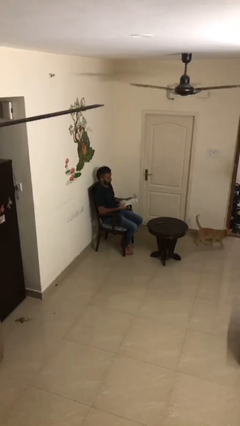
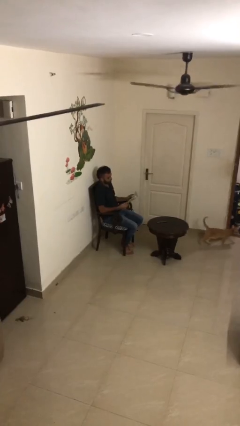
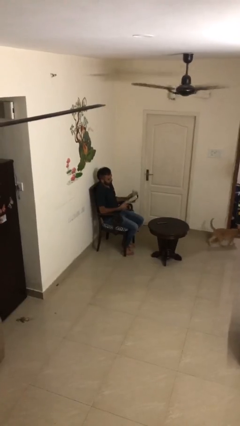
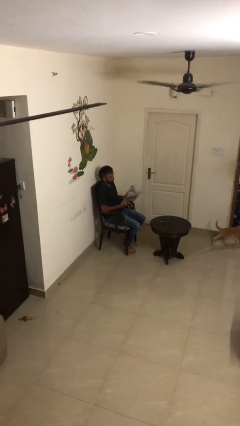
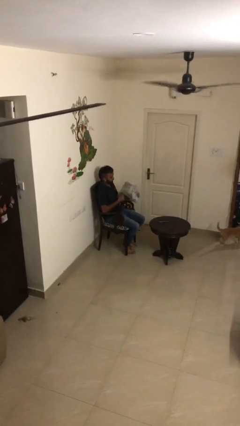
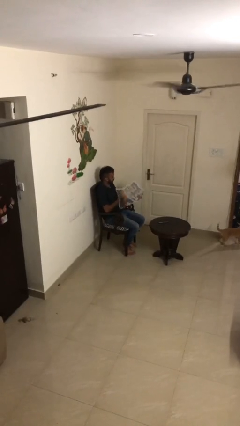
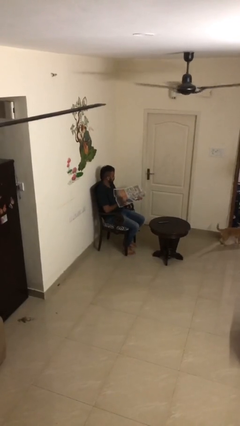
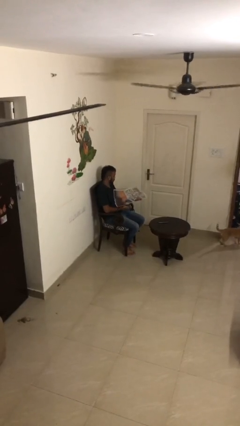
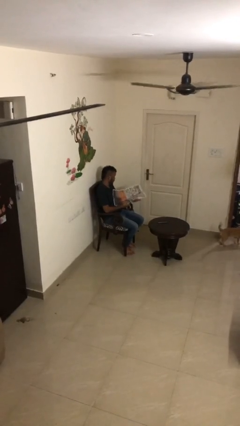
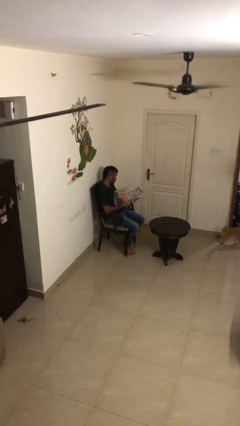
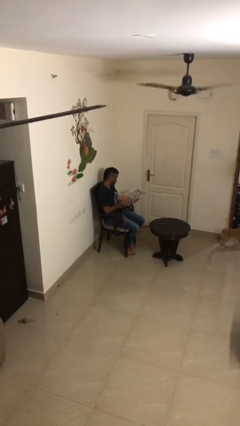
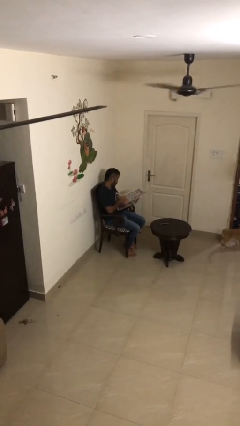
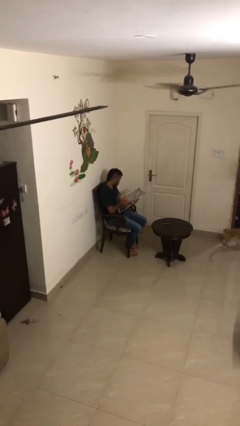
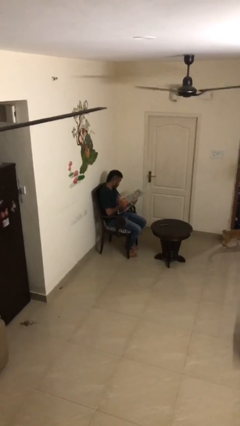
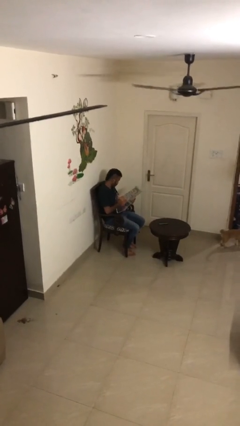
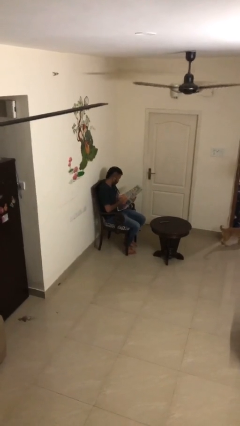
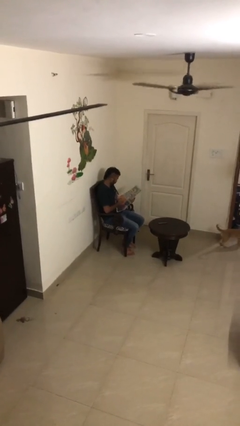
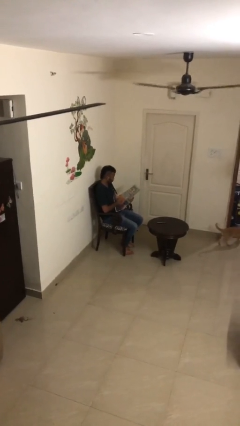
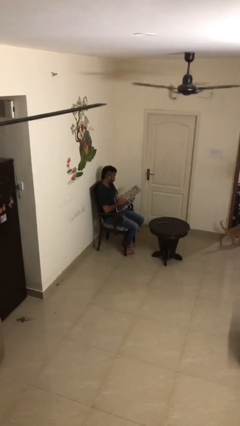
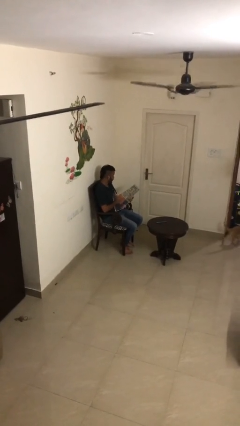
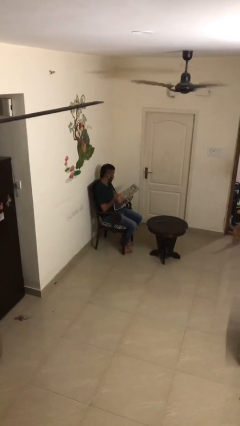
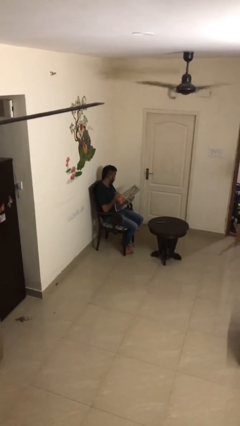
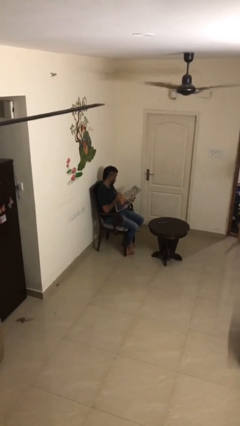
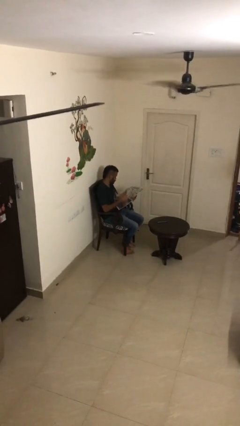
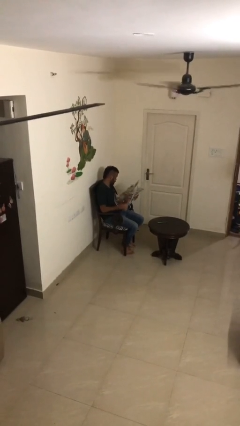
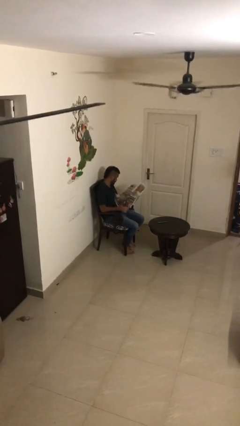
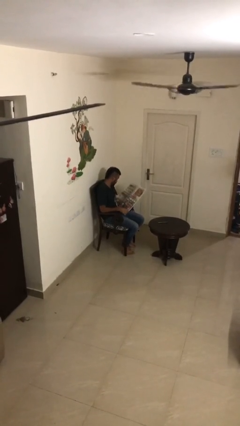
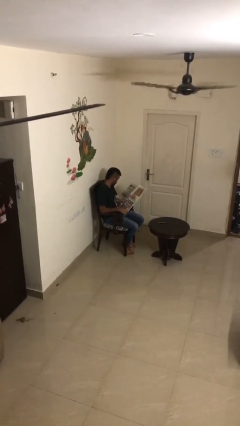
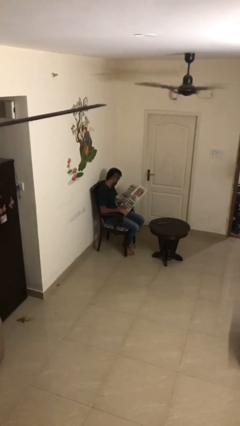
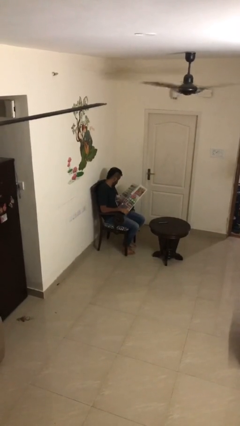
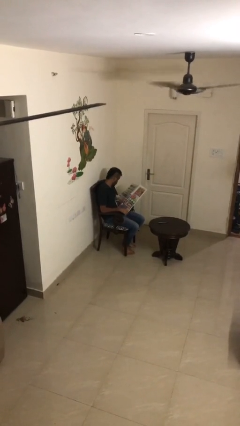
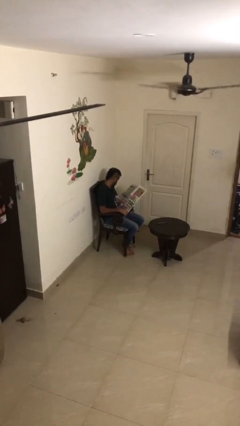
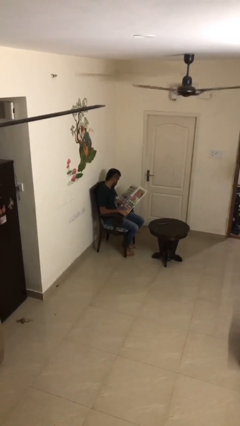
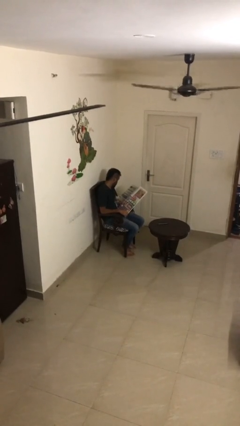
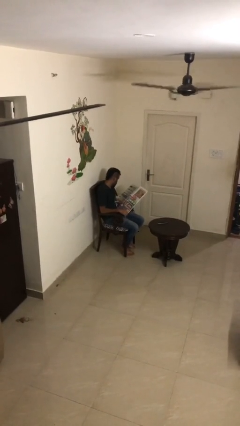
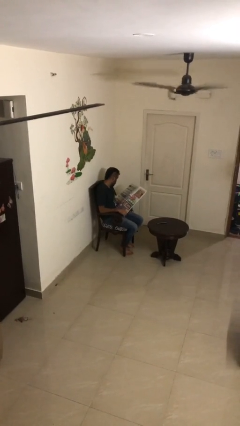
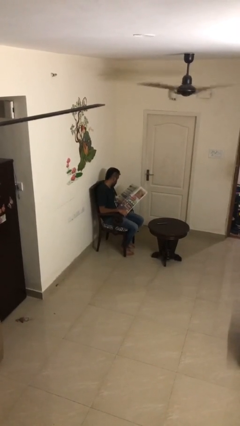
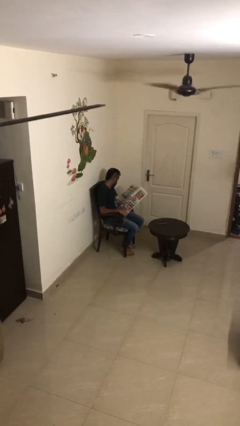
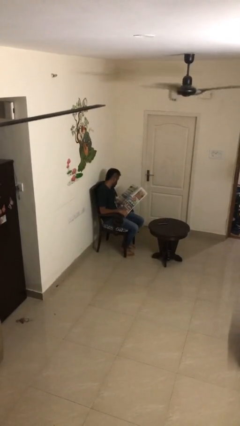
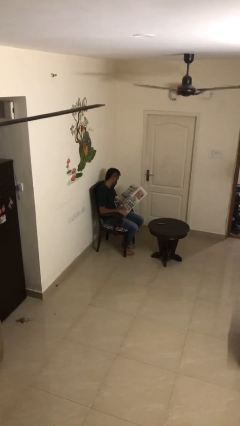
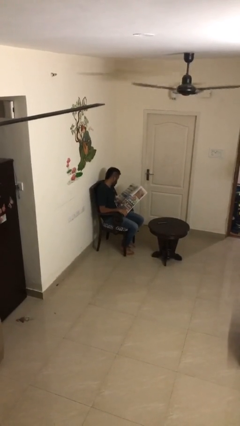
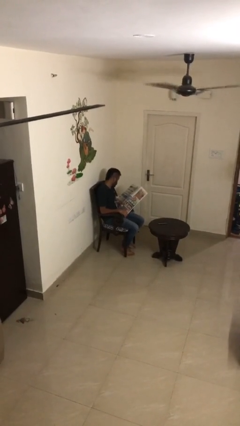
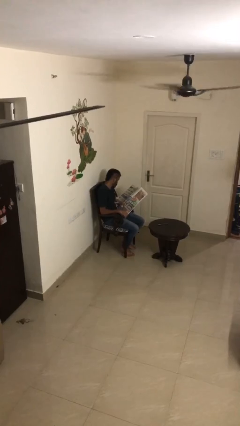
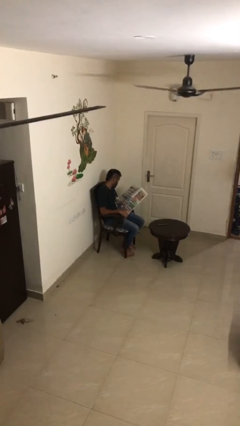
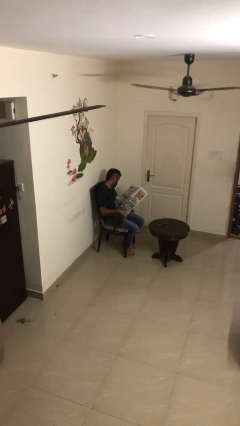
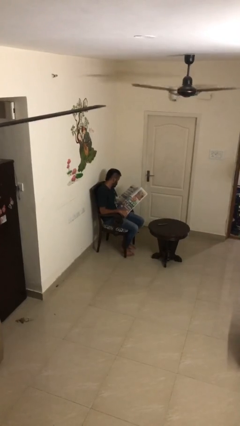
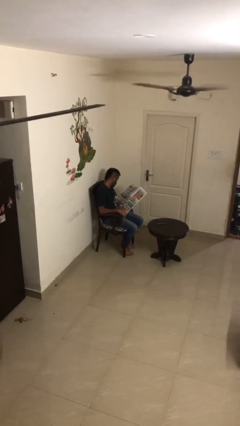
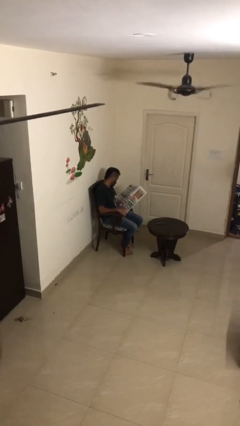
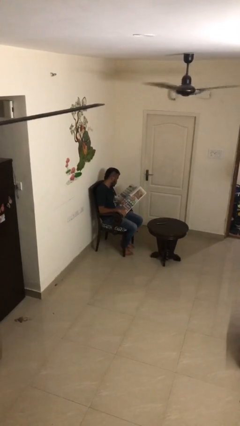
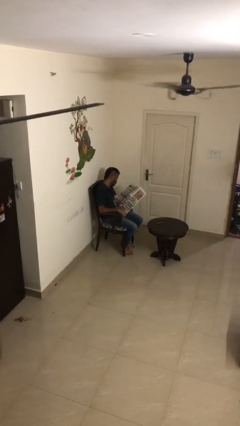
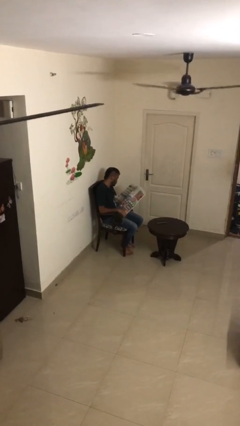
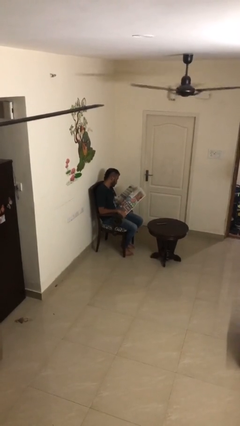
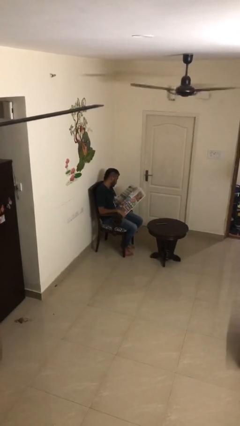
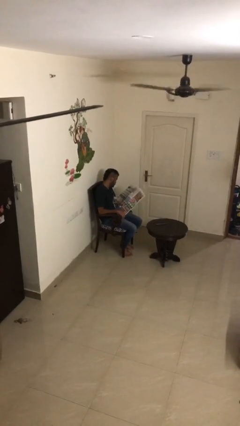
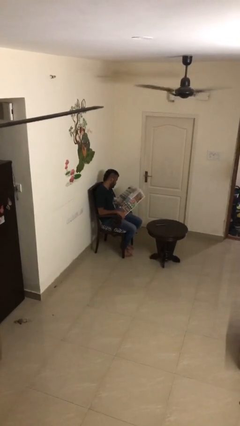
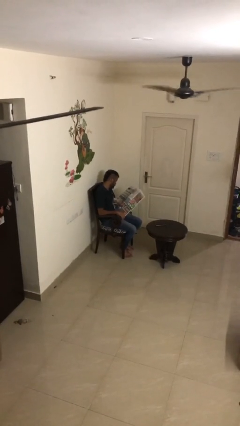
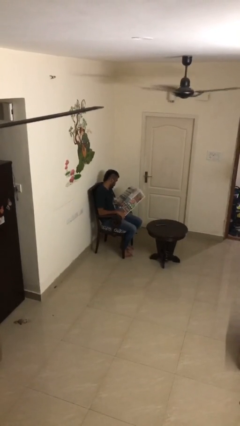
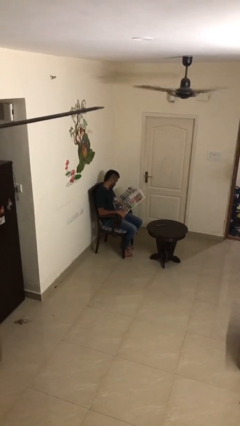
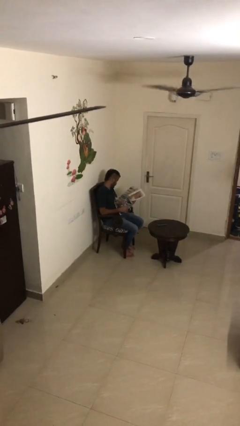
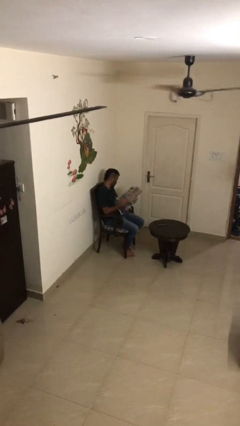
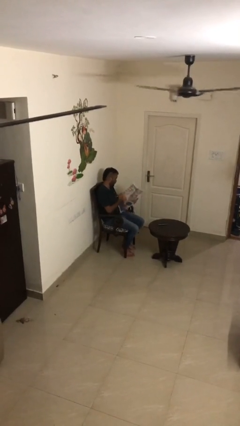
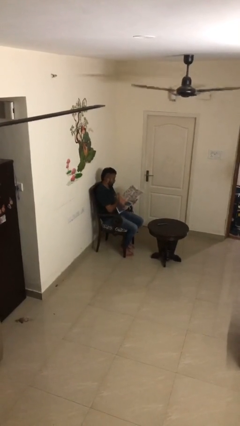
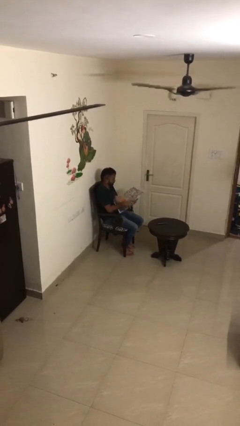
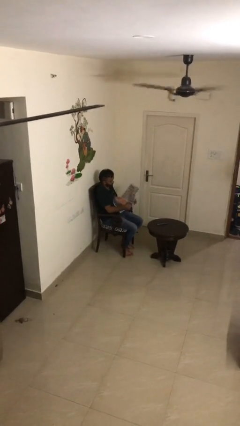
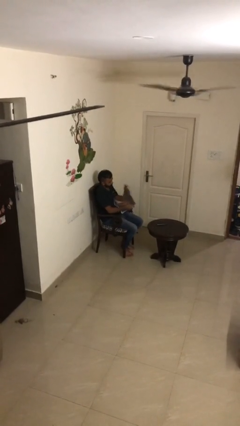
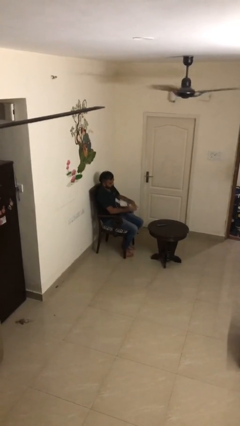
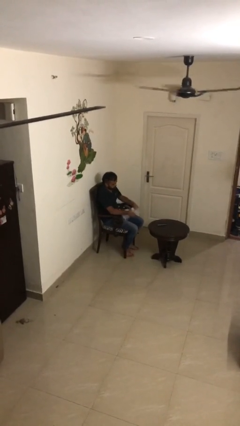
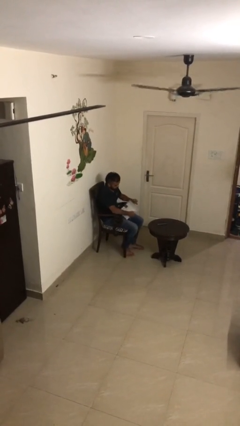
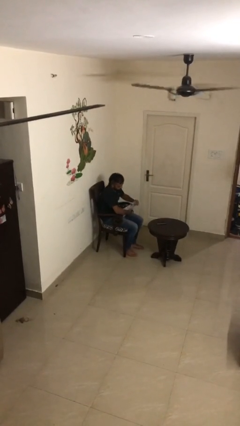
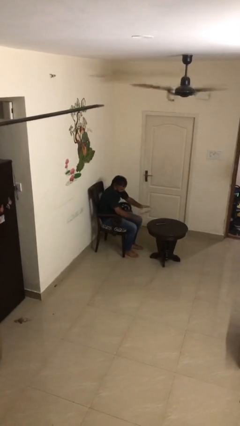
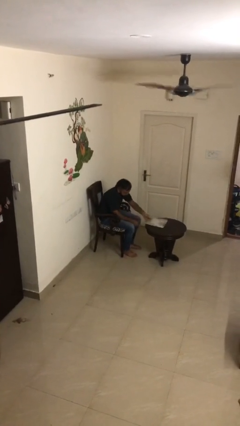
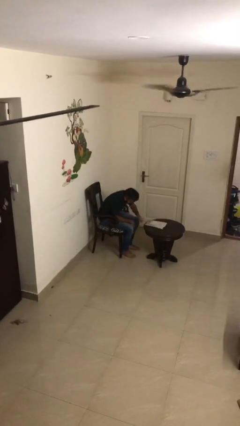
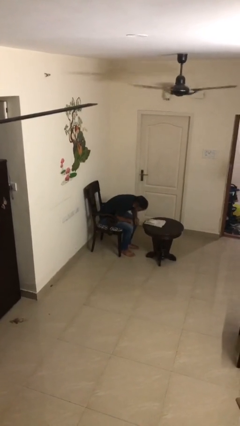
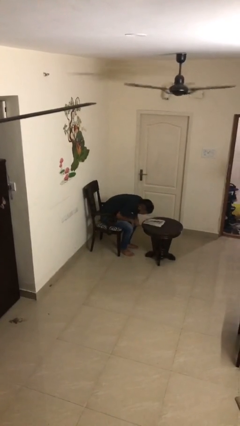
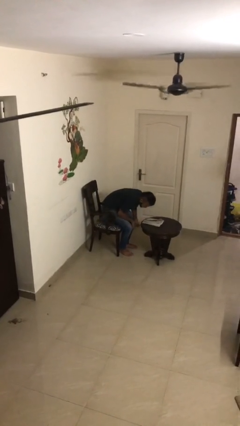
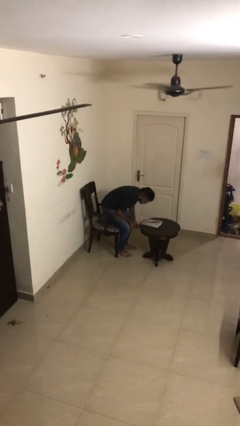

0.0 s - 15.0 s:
person reads document

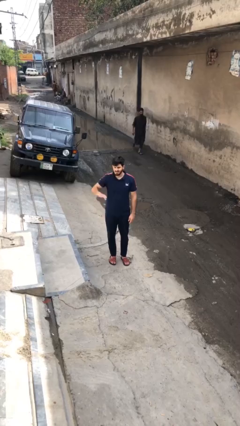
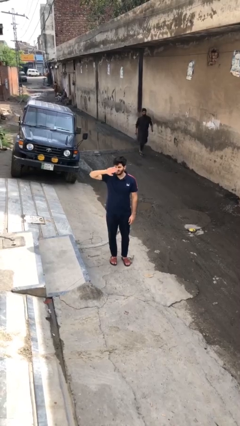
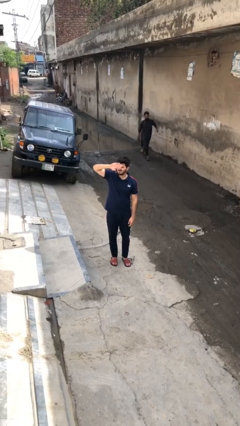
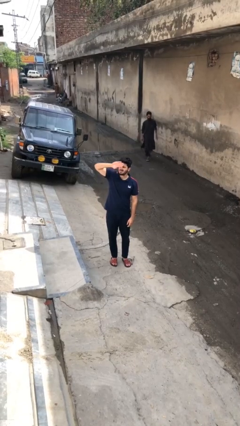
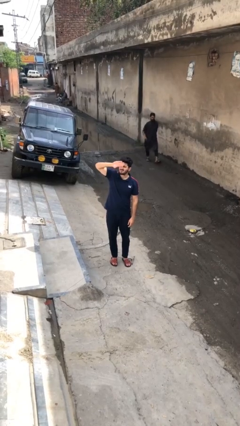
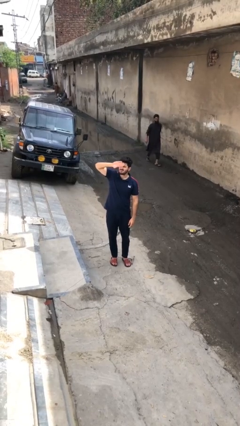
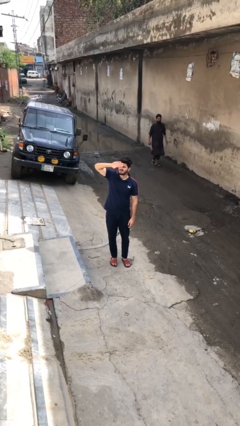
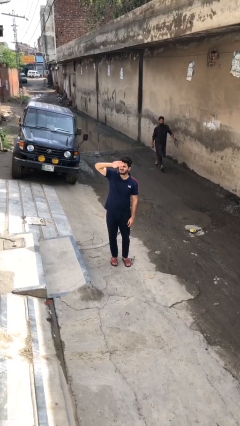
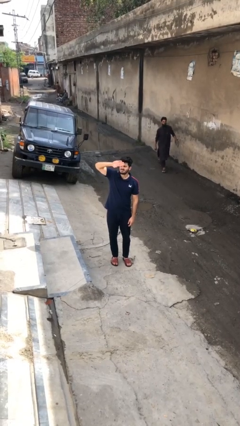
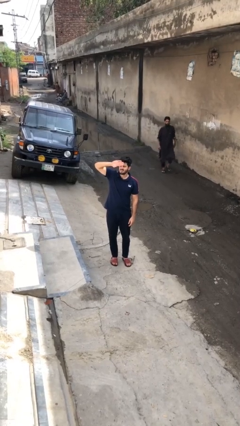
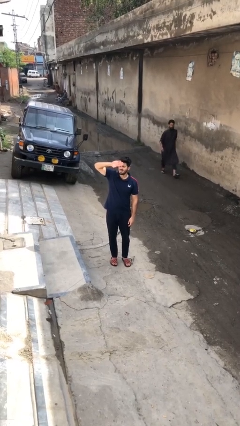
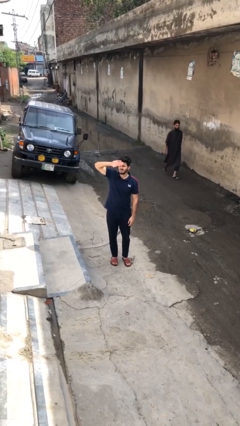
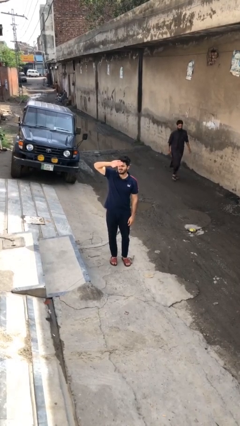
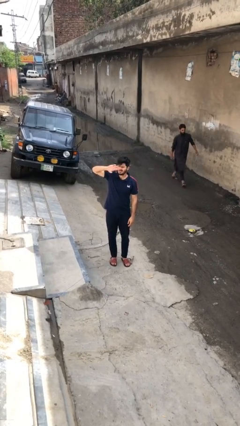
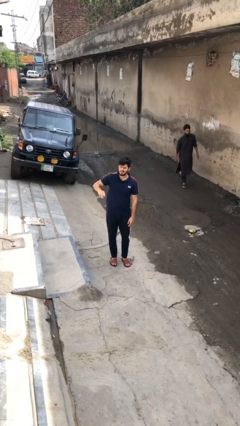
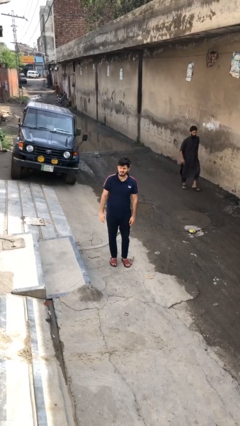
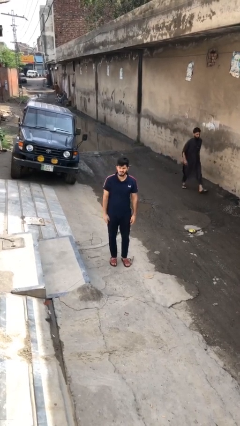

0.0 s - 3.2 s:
person shades eyes
